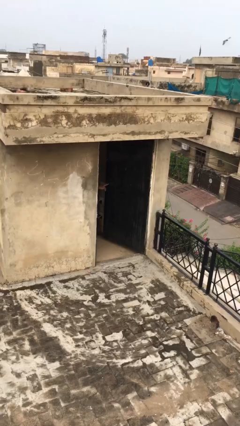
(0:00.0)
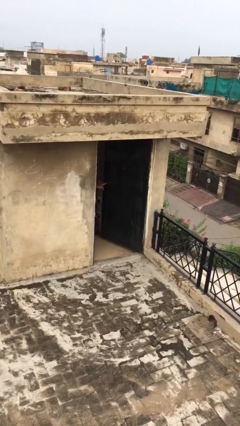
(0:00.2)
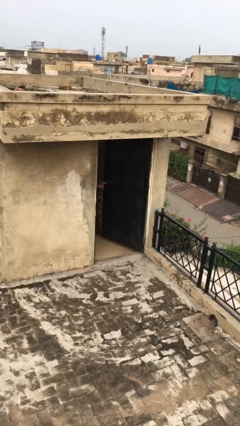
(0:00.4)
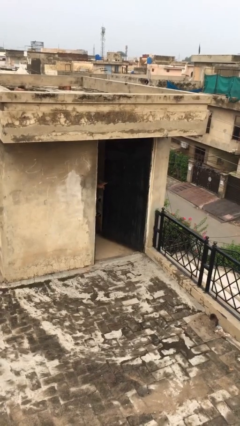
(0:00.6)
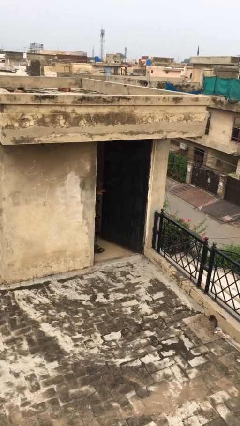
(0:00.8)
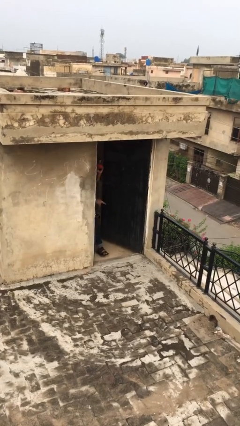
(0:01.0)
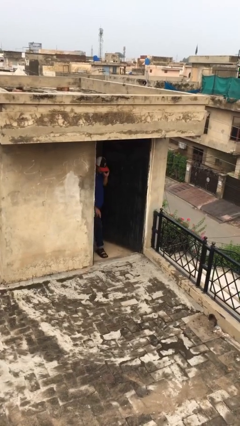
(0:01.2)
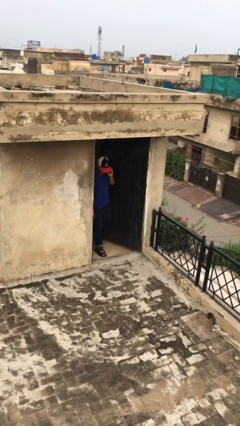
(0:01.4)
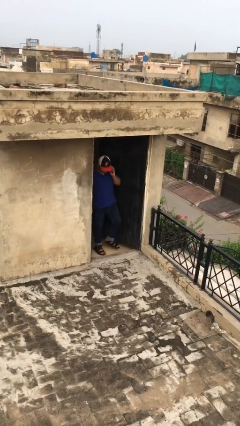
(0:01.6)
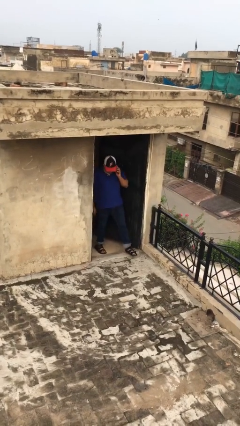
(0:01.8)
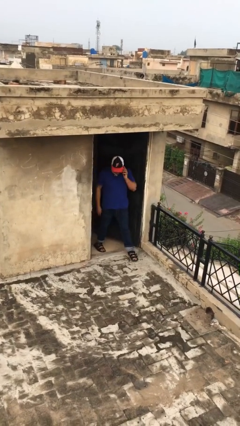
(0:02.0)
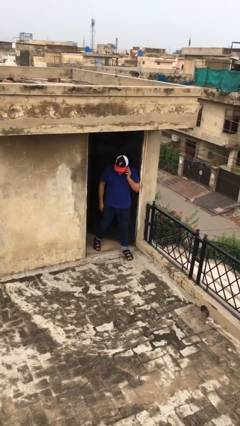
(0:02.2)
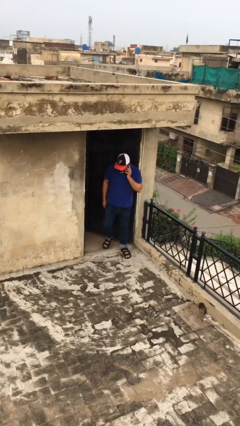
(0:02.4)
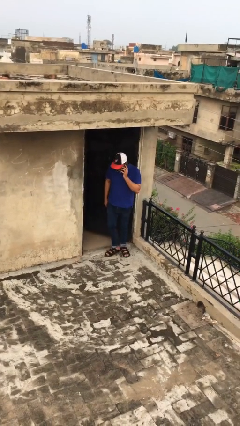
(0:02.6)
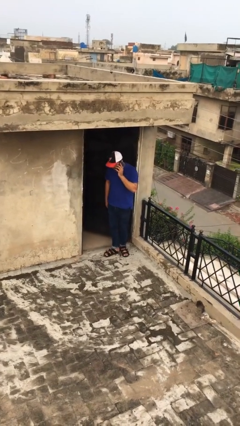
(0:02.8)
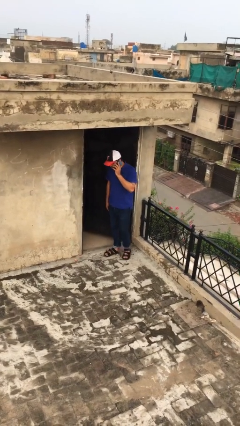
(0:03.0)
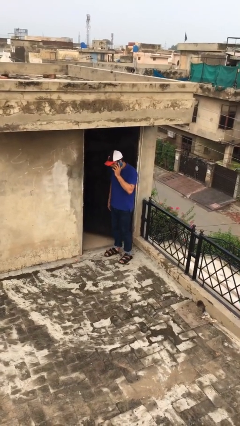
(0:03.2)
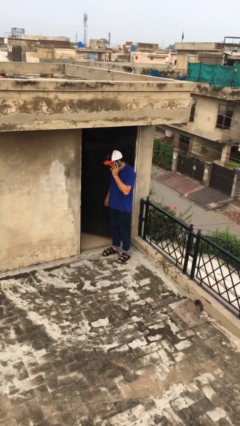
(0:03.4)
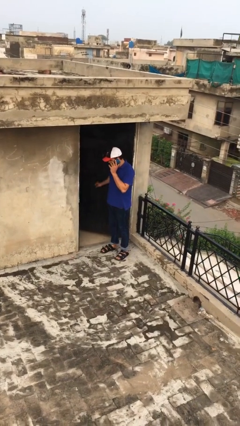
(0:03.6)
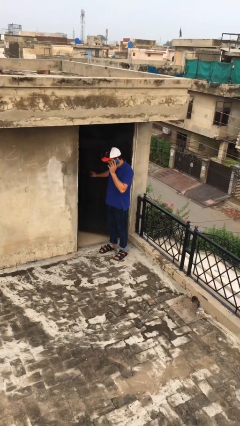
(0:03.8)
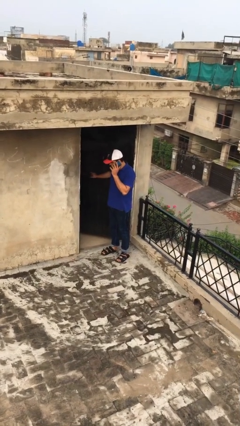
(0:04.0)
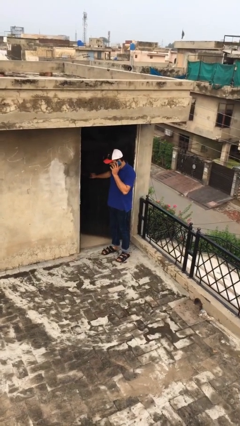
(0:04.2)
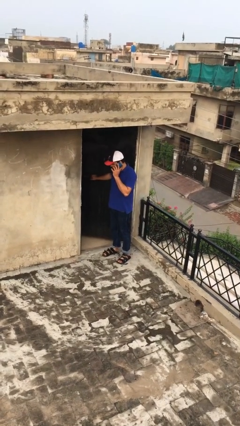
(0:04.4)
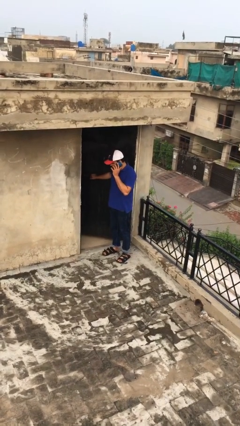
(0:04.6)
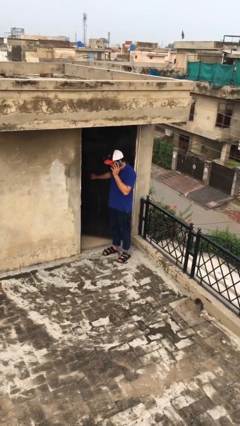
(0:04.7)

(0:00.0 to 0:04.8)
person enters scene through structure

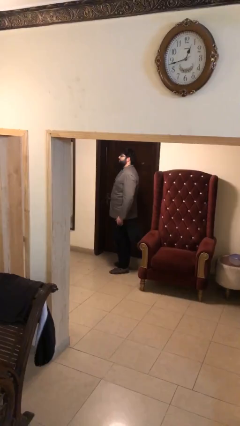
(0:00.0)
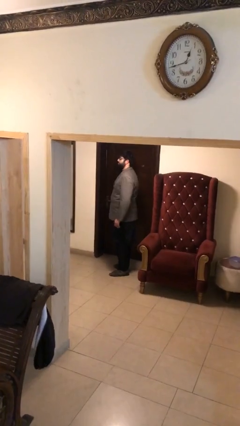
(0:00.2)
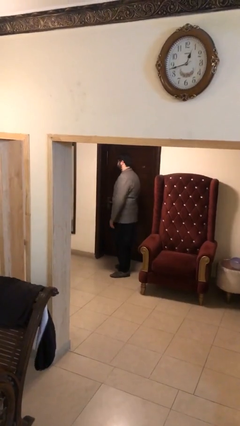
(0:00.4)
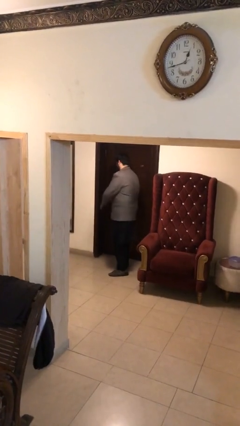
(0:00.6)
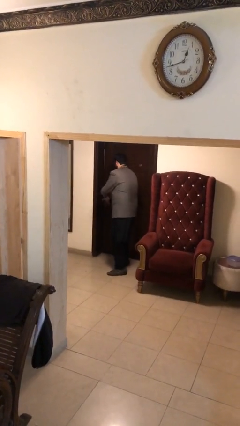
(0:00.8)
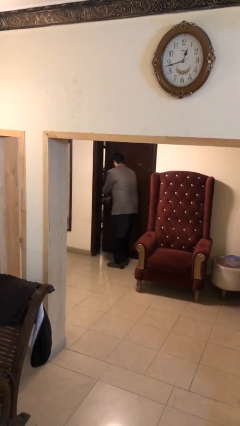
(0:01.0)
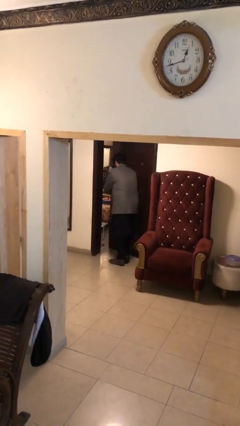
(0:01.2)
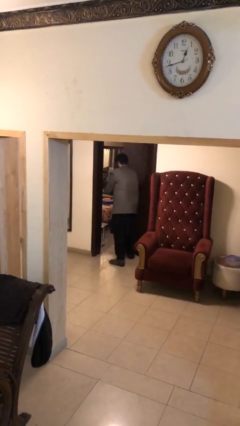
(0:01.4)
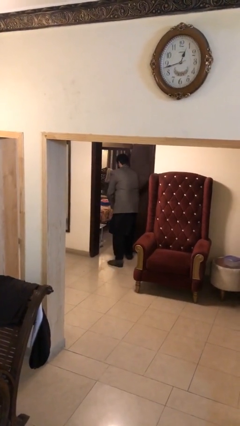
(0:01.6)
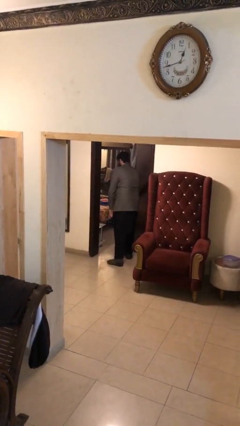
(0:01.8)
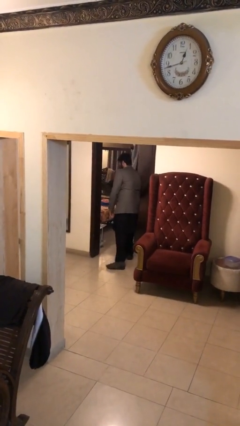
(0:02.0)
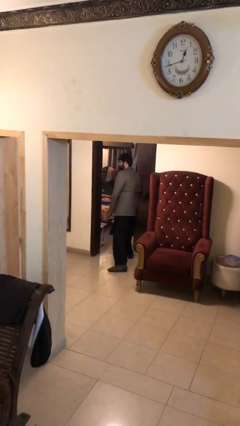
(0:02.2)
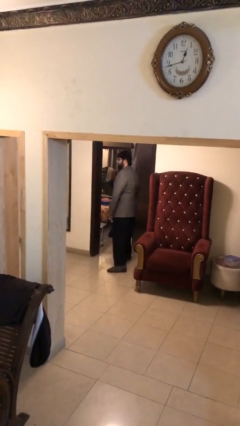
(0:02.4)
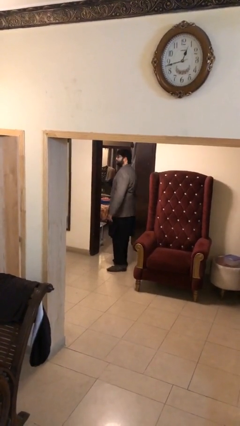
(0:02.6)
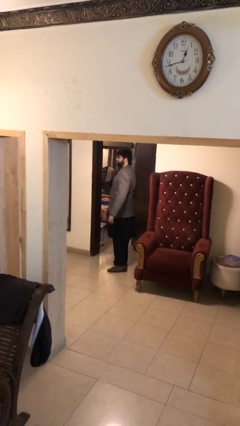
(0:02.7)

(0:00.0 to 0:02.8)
person opens facility door

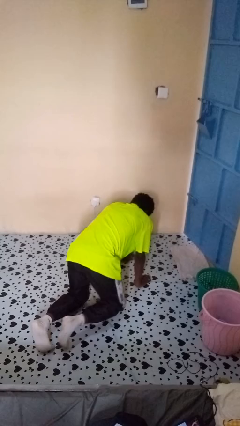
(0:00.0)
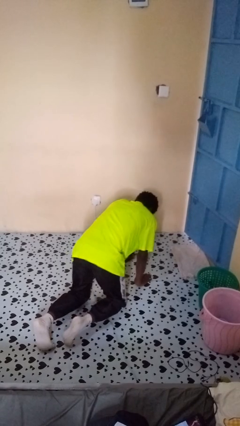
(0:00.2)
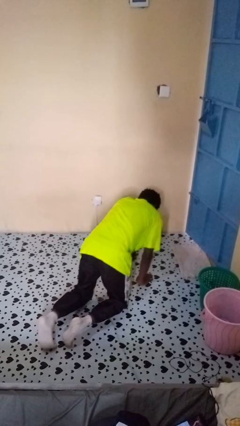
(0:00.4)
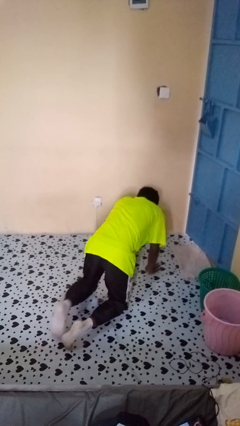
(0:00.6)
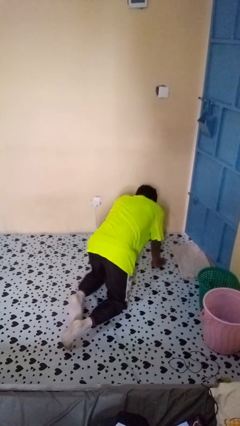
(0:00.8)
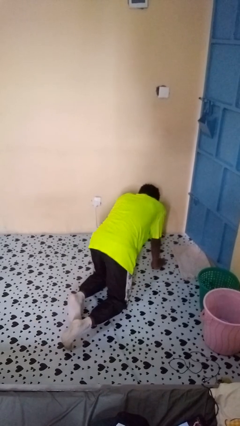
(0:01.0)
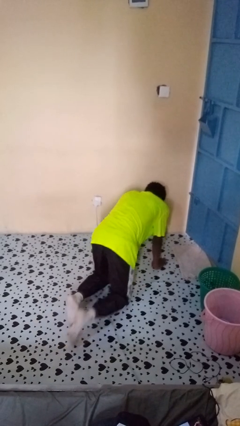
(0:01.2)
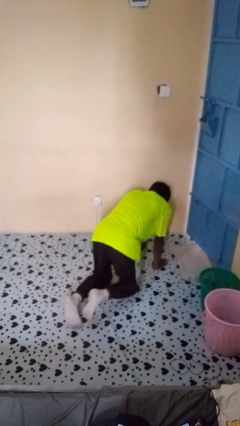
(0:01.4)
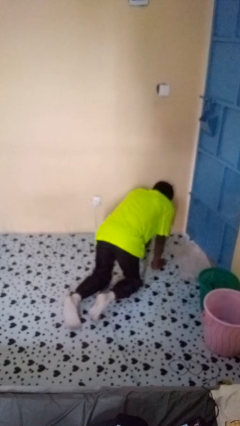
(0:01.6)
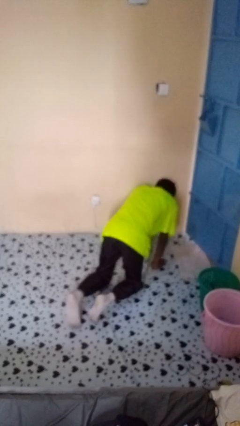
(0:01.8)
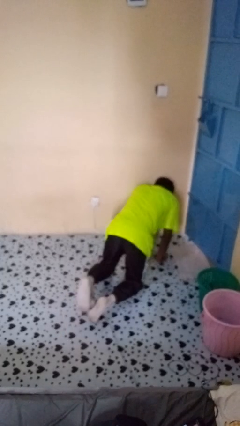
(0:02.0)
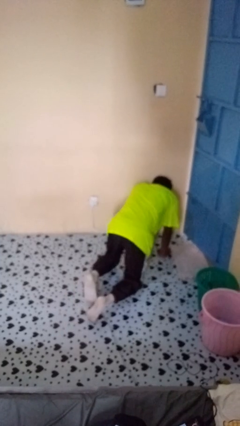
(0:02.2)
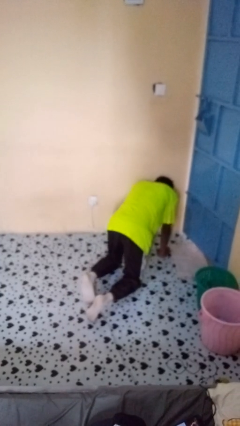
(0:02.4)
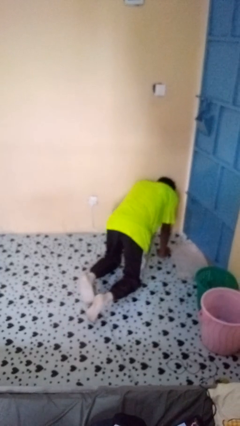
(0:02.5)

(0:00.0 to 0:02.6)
person crawls

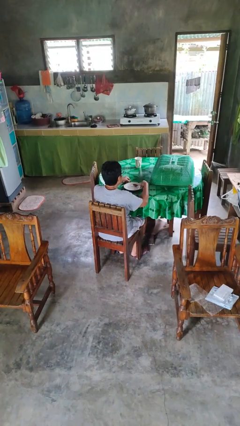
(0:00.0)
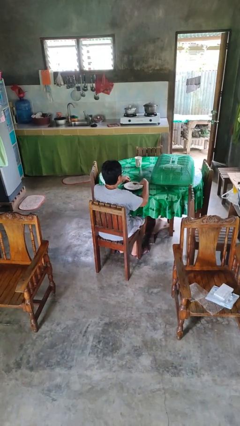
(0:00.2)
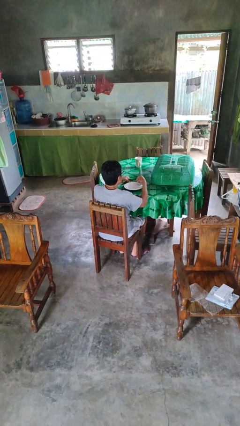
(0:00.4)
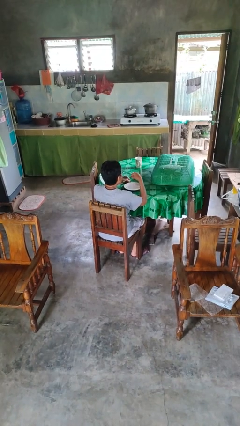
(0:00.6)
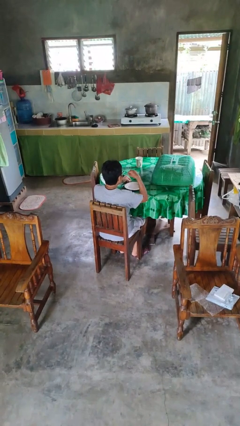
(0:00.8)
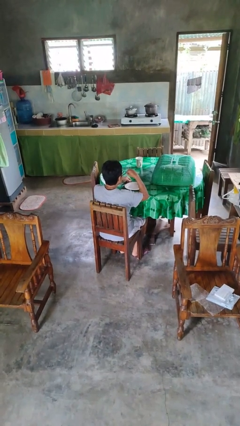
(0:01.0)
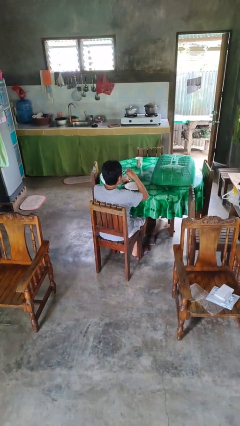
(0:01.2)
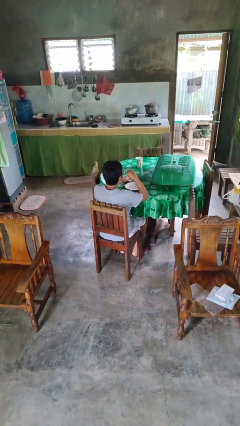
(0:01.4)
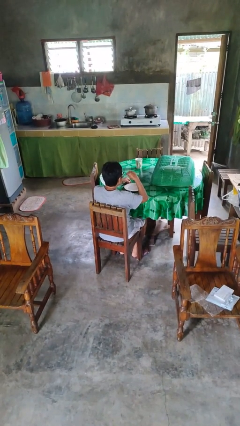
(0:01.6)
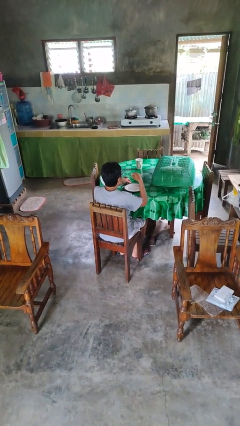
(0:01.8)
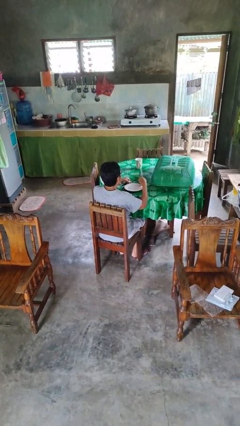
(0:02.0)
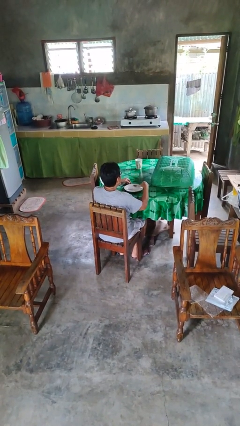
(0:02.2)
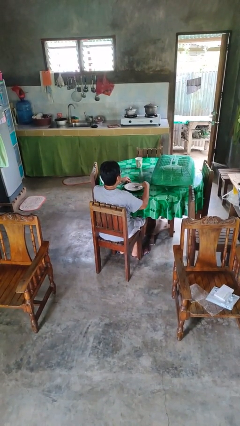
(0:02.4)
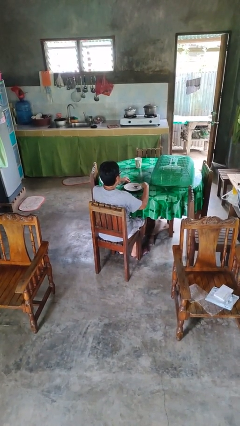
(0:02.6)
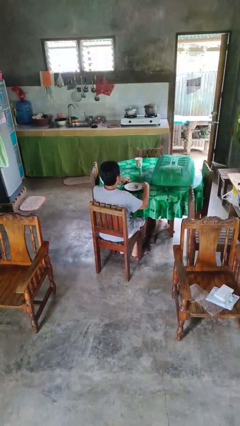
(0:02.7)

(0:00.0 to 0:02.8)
person eats with utensil

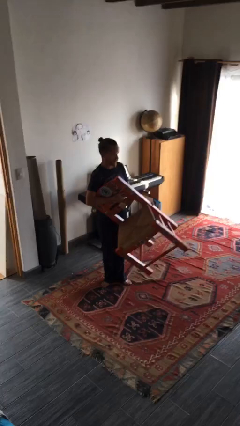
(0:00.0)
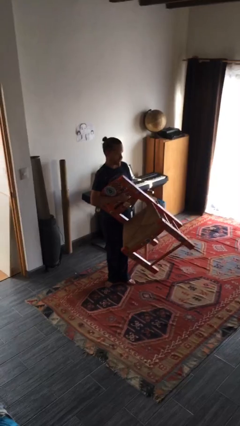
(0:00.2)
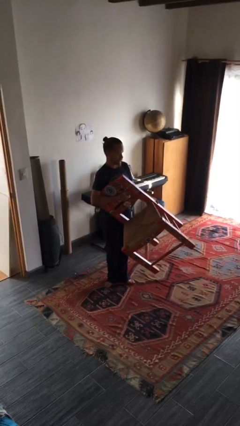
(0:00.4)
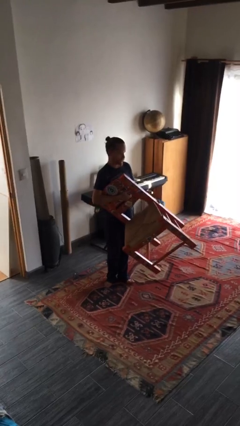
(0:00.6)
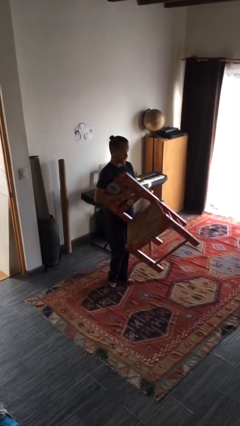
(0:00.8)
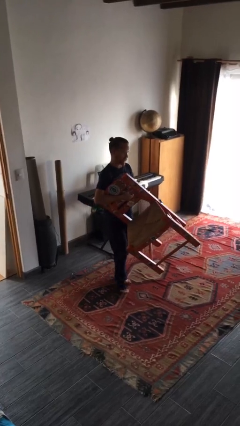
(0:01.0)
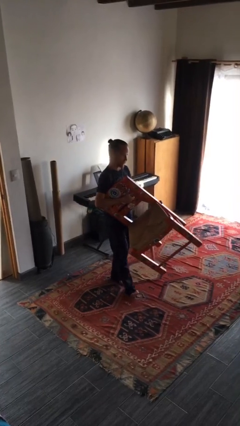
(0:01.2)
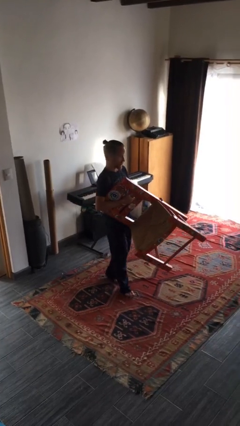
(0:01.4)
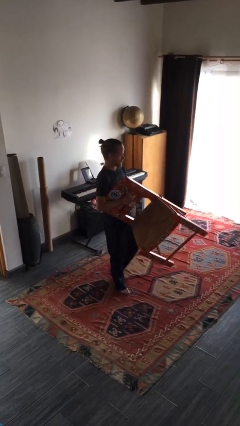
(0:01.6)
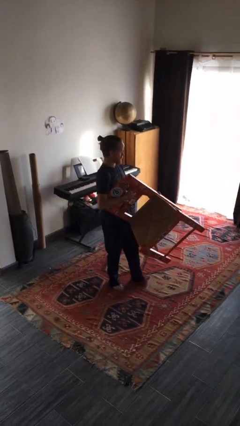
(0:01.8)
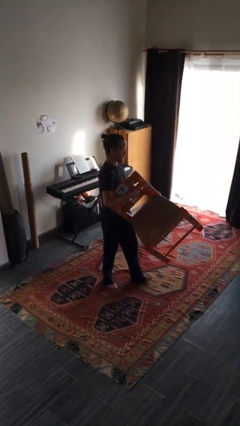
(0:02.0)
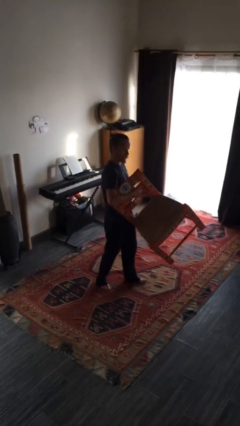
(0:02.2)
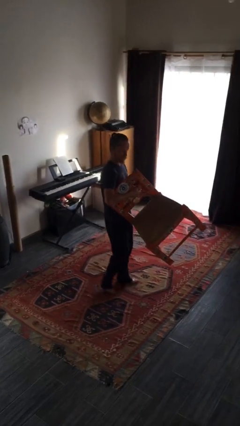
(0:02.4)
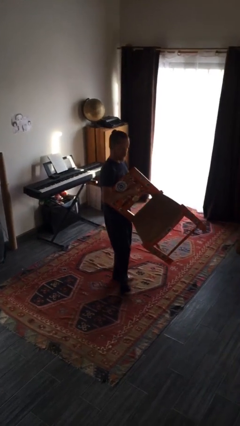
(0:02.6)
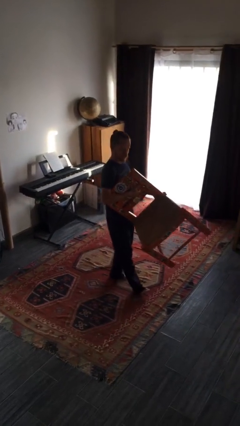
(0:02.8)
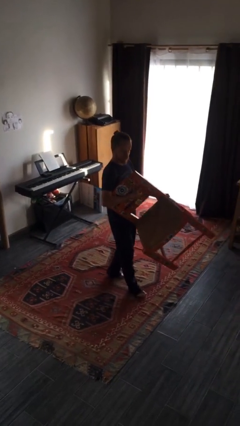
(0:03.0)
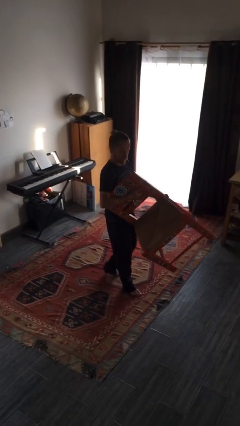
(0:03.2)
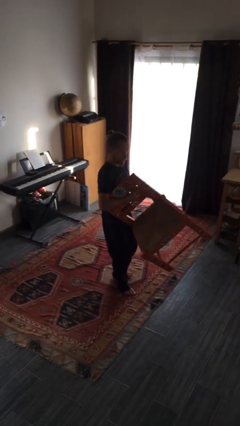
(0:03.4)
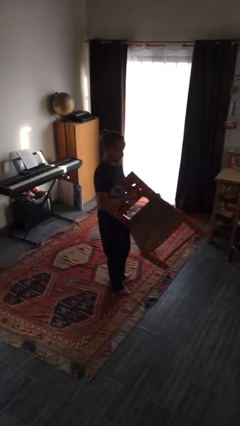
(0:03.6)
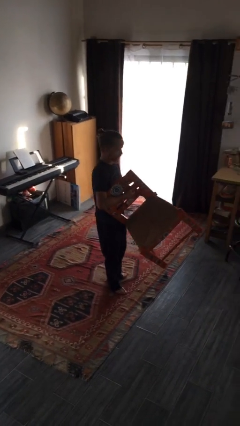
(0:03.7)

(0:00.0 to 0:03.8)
person carries furniture

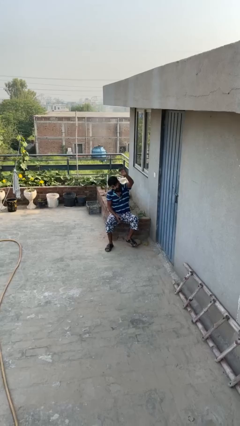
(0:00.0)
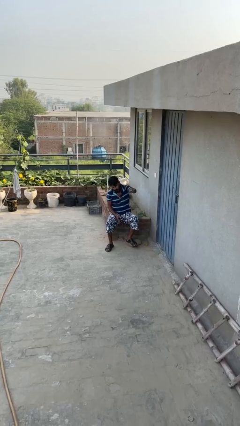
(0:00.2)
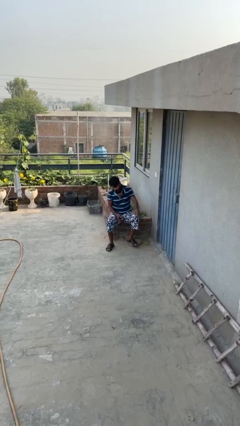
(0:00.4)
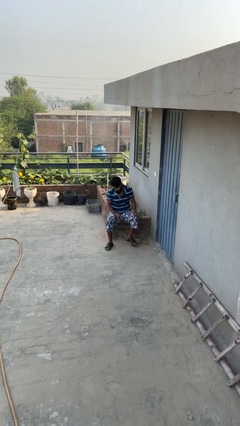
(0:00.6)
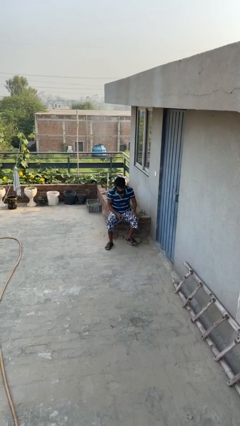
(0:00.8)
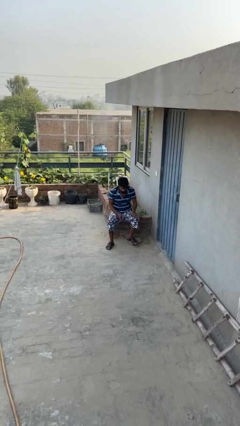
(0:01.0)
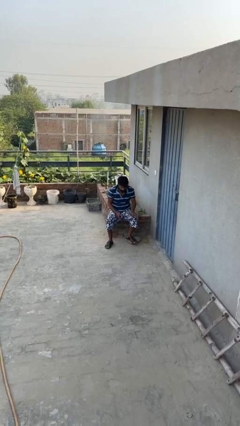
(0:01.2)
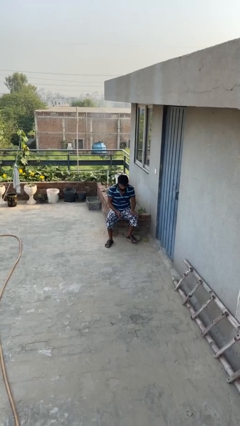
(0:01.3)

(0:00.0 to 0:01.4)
person gestures lower hand
